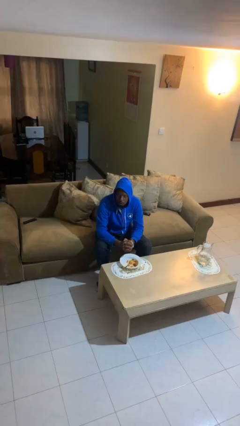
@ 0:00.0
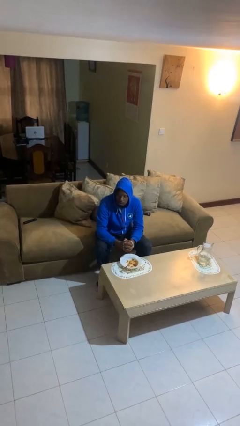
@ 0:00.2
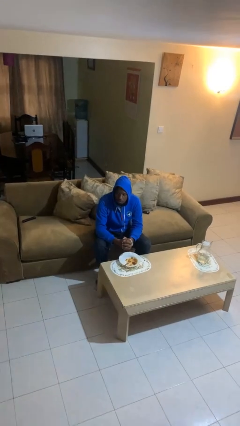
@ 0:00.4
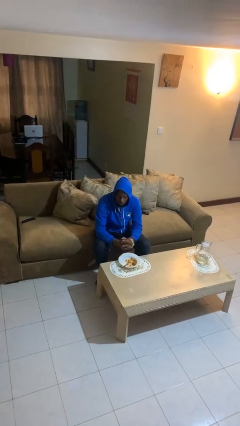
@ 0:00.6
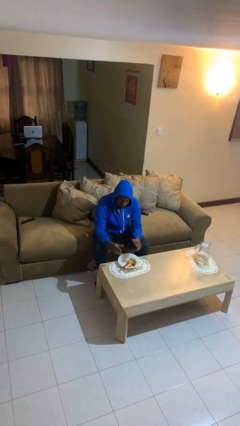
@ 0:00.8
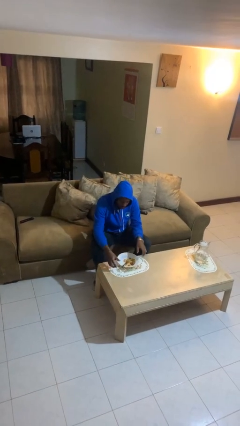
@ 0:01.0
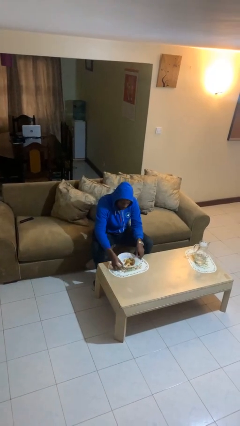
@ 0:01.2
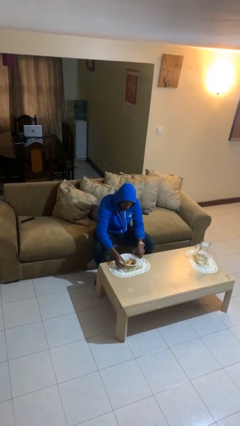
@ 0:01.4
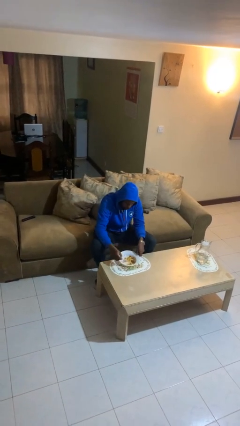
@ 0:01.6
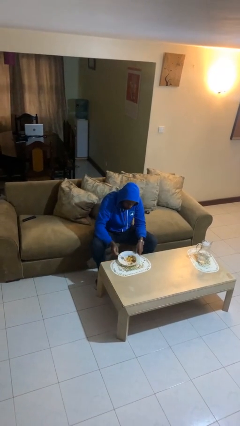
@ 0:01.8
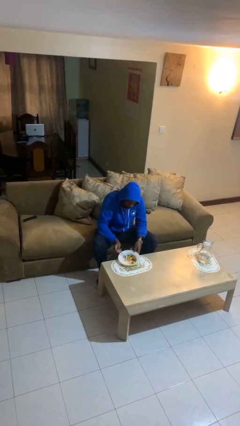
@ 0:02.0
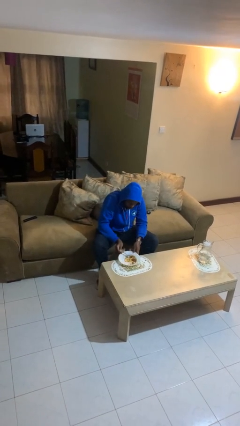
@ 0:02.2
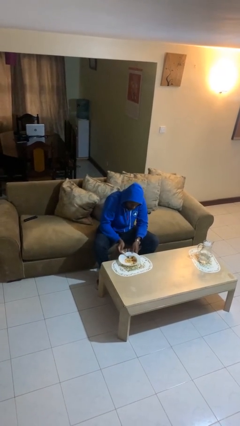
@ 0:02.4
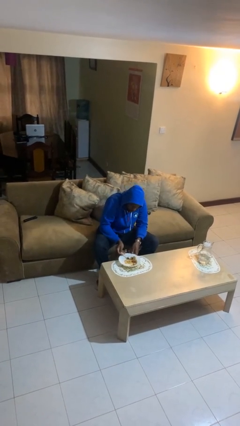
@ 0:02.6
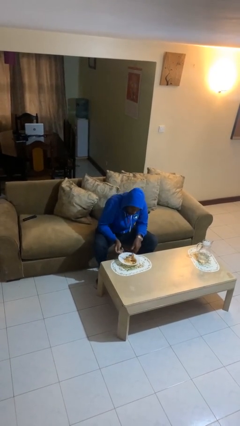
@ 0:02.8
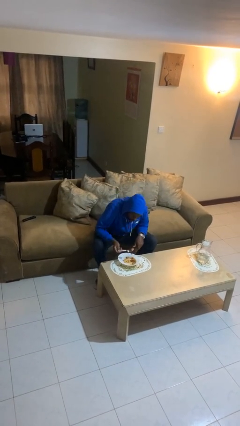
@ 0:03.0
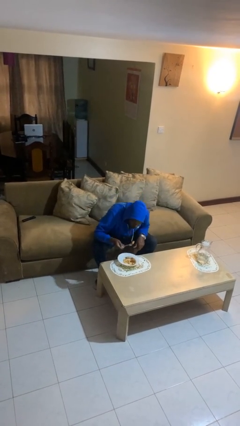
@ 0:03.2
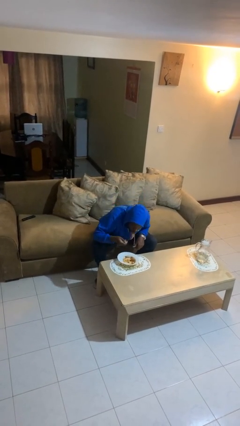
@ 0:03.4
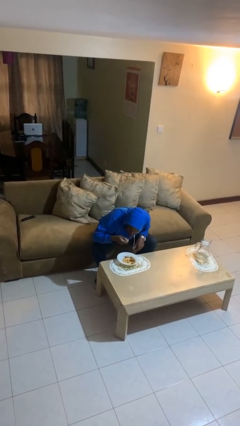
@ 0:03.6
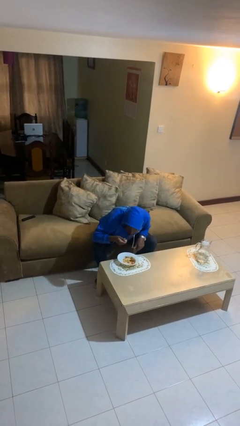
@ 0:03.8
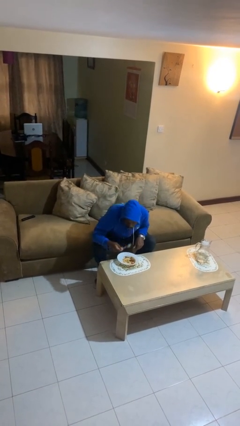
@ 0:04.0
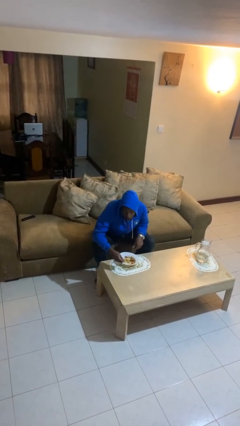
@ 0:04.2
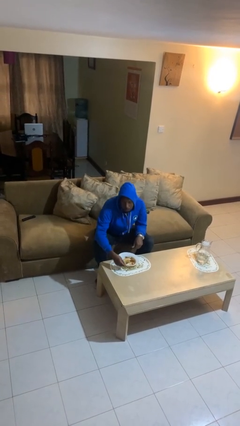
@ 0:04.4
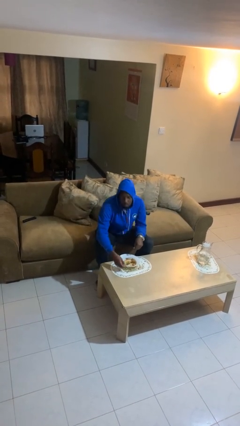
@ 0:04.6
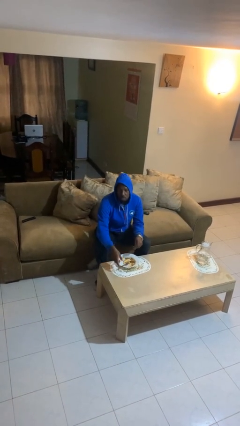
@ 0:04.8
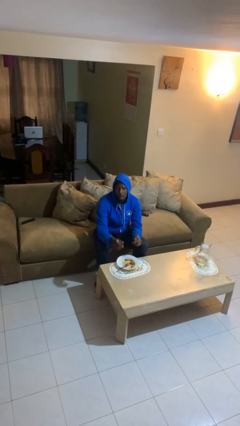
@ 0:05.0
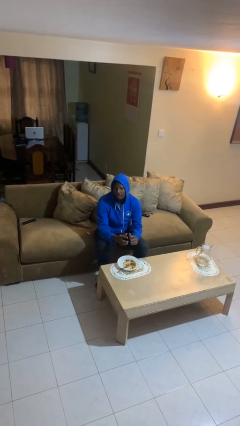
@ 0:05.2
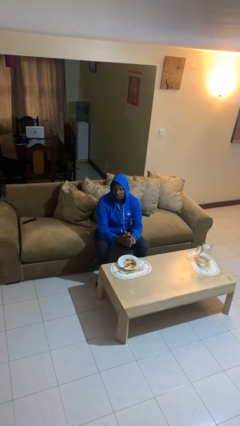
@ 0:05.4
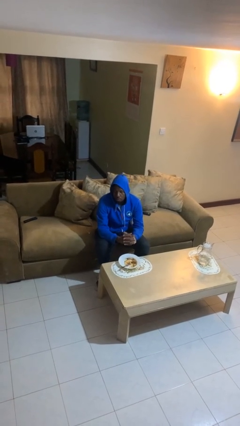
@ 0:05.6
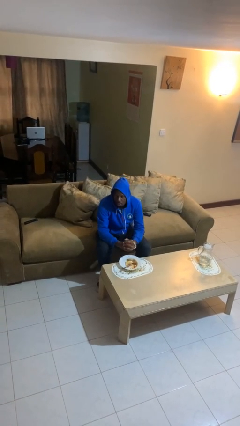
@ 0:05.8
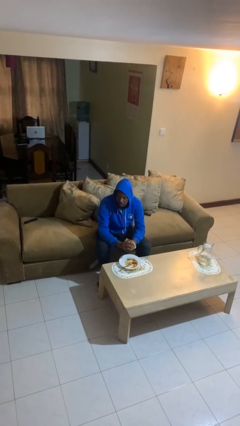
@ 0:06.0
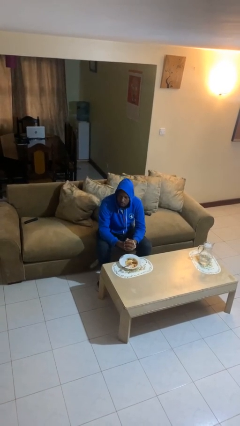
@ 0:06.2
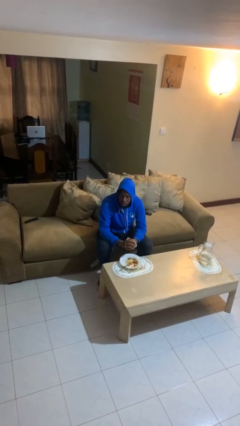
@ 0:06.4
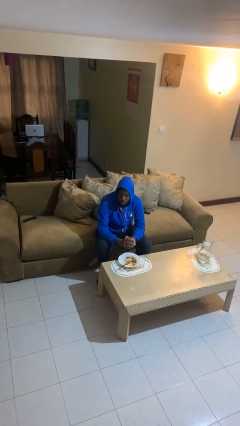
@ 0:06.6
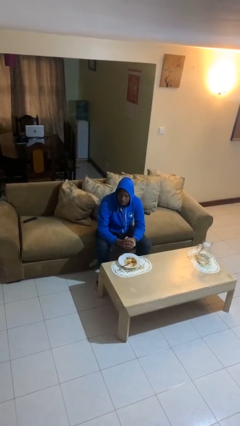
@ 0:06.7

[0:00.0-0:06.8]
person eats with utensil

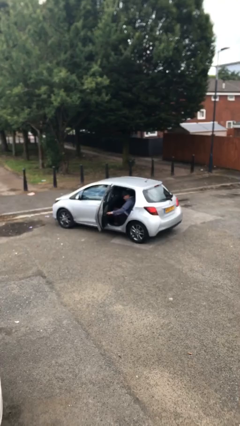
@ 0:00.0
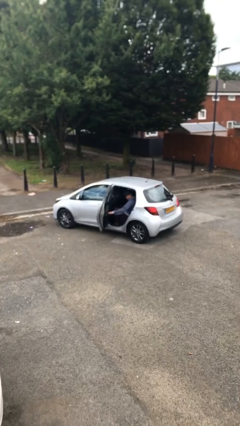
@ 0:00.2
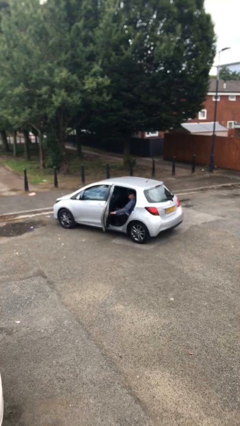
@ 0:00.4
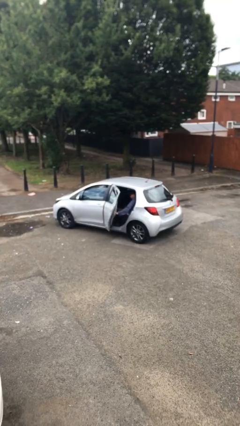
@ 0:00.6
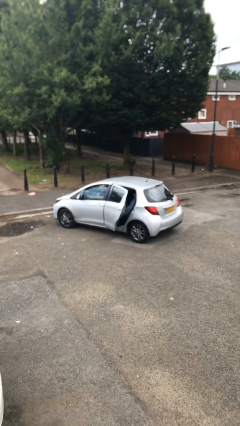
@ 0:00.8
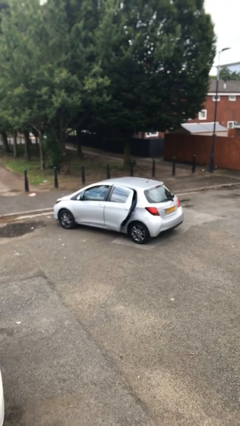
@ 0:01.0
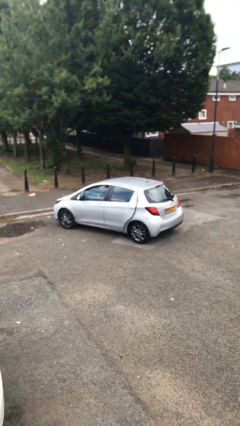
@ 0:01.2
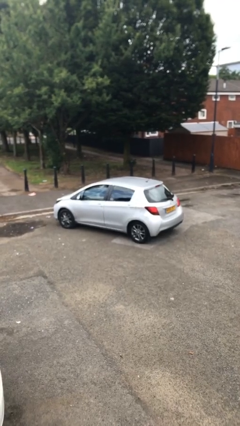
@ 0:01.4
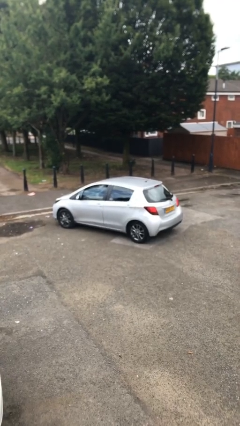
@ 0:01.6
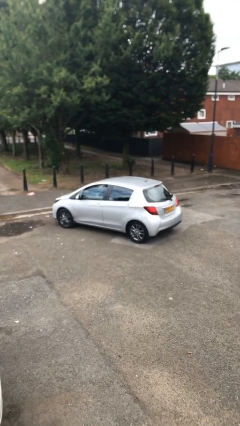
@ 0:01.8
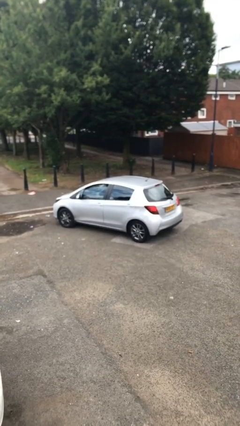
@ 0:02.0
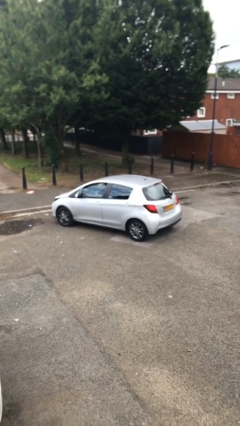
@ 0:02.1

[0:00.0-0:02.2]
person closes car door

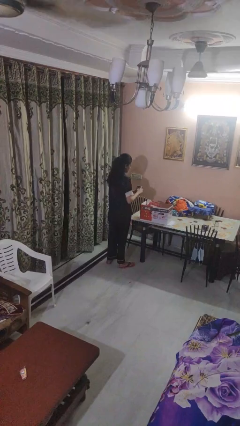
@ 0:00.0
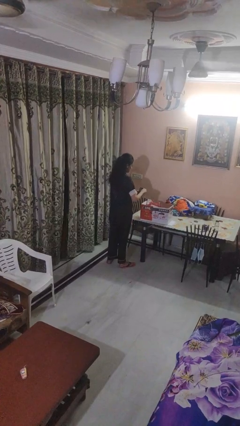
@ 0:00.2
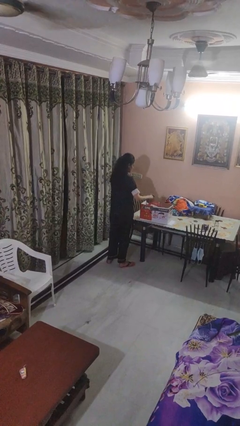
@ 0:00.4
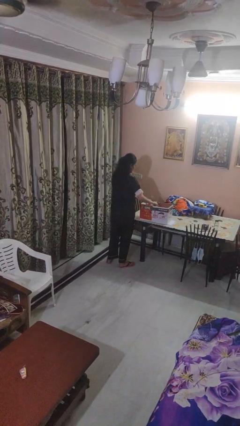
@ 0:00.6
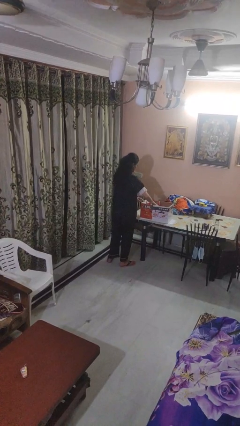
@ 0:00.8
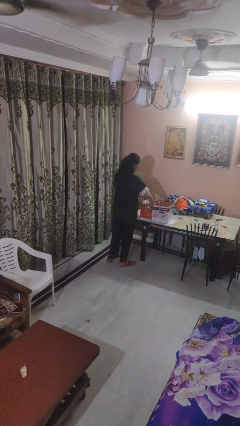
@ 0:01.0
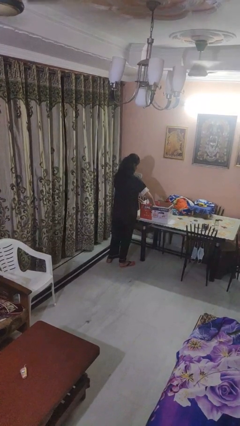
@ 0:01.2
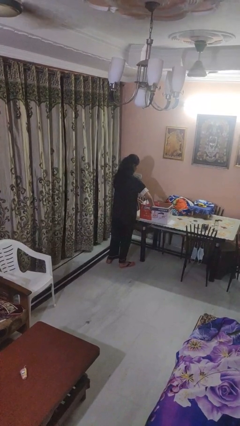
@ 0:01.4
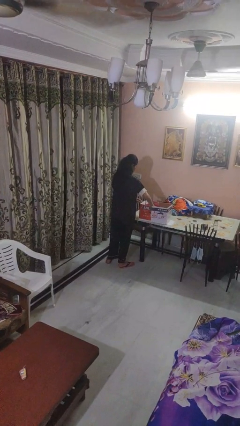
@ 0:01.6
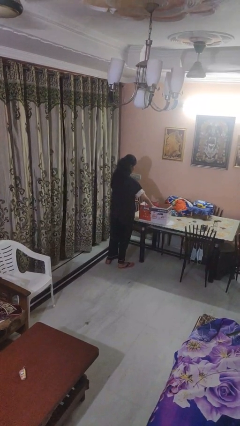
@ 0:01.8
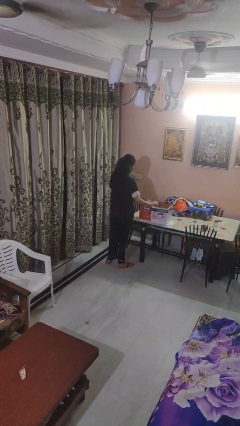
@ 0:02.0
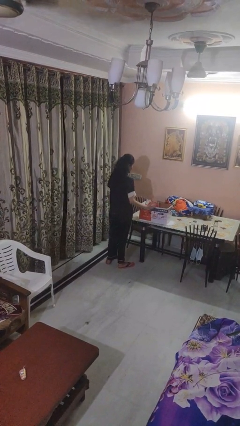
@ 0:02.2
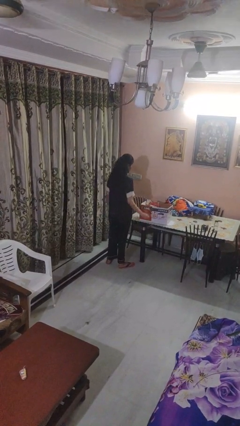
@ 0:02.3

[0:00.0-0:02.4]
person puts object into box

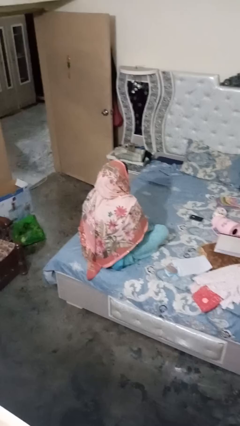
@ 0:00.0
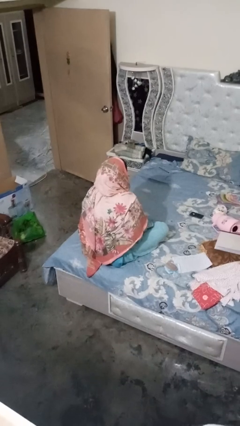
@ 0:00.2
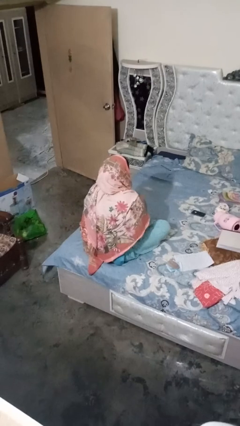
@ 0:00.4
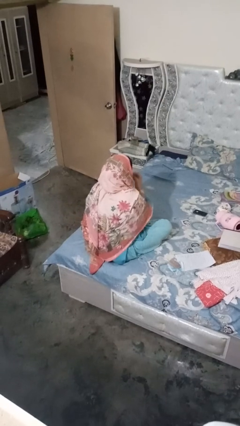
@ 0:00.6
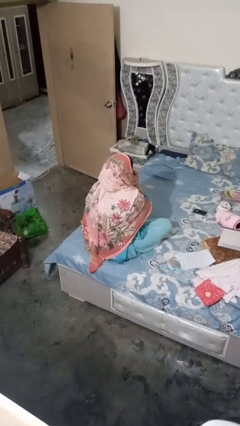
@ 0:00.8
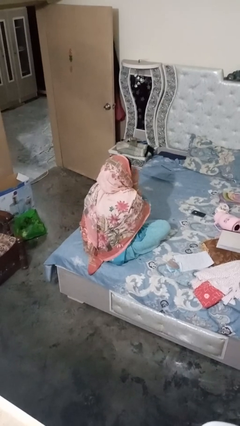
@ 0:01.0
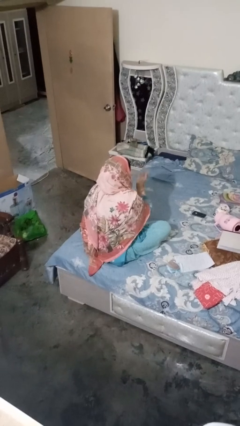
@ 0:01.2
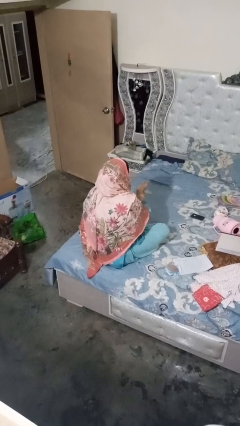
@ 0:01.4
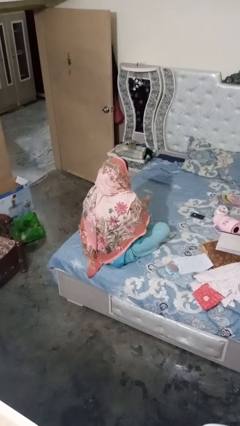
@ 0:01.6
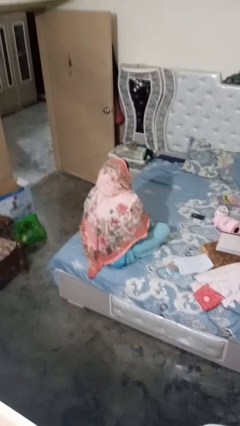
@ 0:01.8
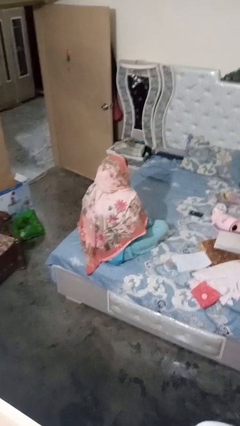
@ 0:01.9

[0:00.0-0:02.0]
person gestures blow kiss

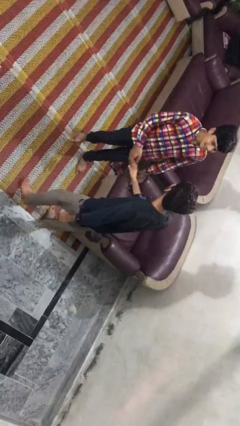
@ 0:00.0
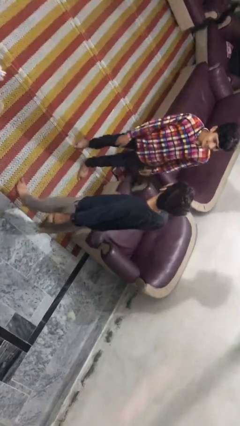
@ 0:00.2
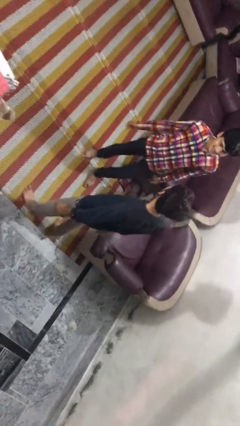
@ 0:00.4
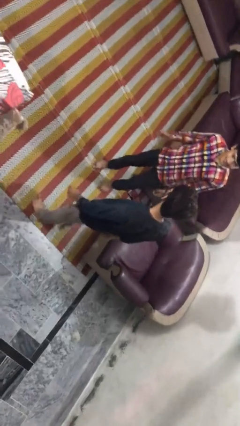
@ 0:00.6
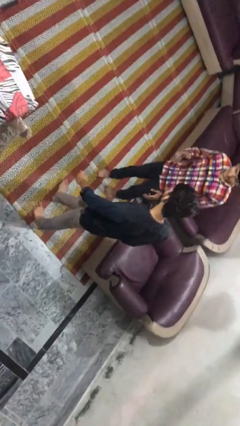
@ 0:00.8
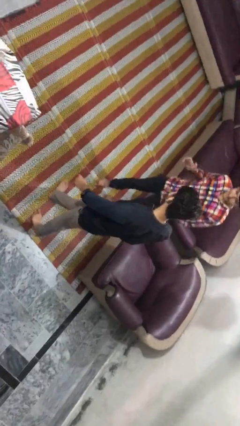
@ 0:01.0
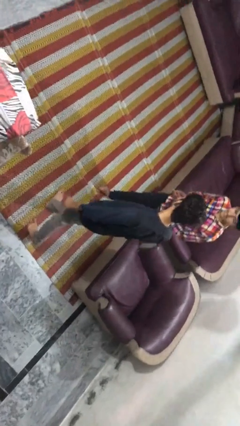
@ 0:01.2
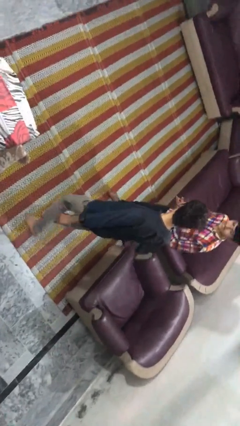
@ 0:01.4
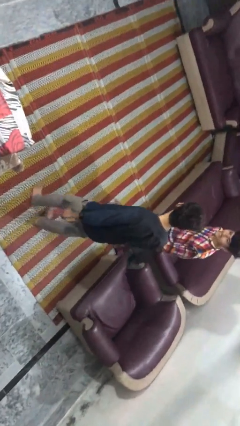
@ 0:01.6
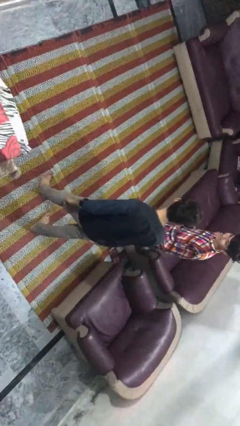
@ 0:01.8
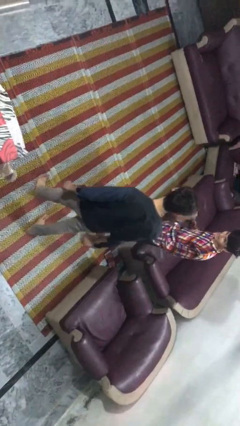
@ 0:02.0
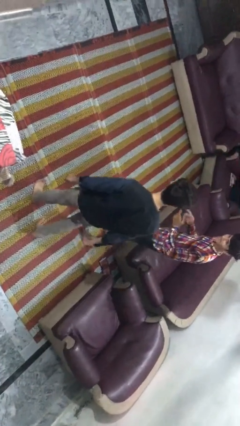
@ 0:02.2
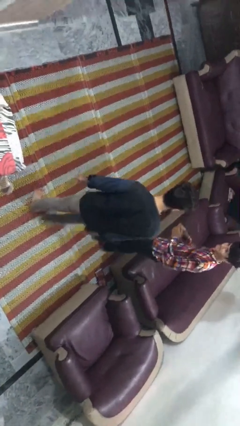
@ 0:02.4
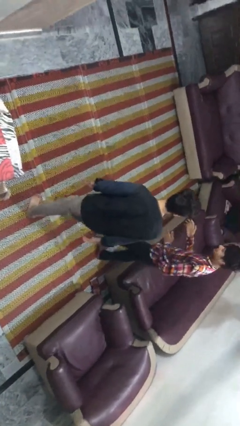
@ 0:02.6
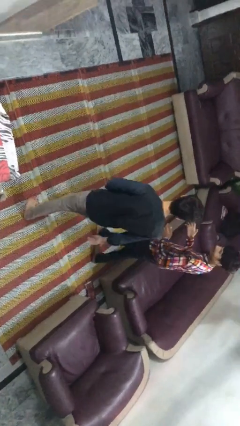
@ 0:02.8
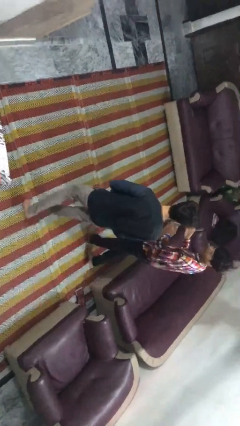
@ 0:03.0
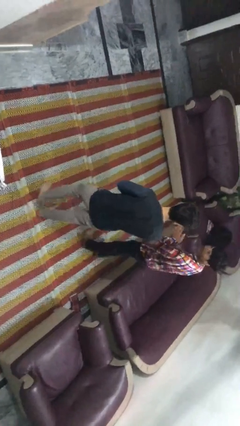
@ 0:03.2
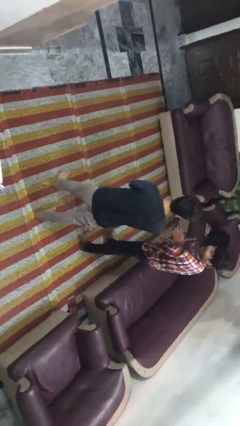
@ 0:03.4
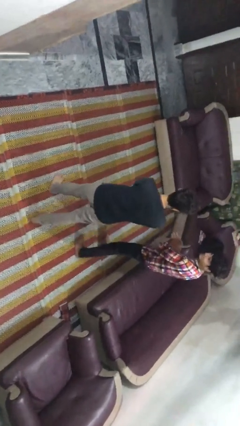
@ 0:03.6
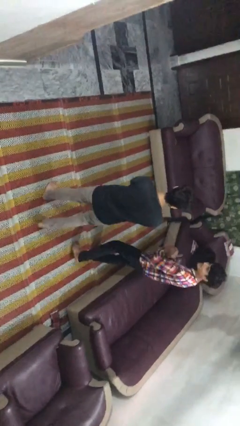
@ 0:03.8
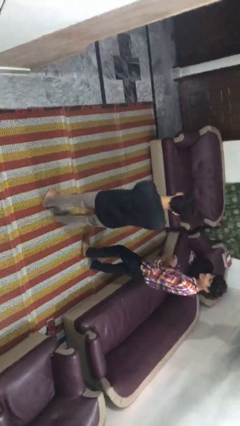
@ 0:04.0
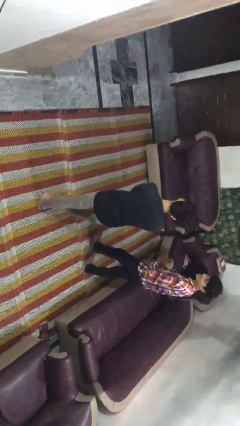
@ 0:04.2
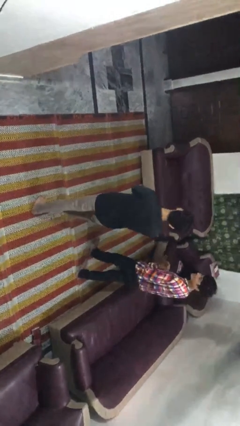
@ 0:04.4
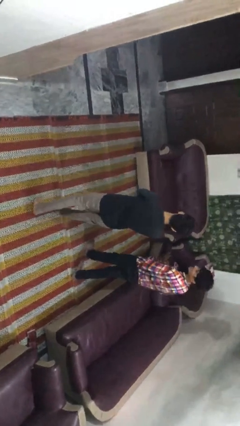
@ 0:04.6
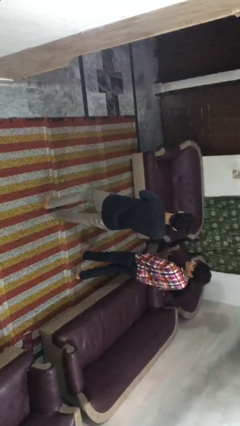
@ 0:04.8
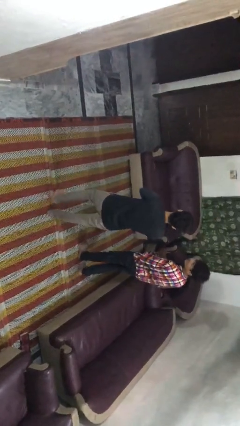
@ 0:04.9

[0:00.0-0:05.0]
person talks to person
